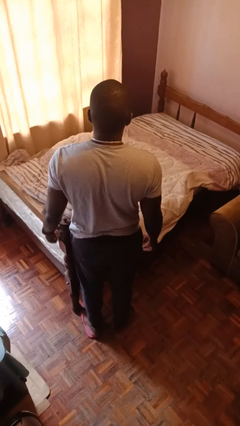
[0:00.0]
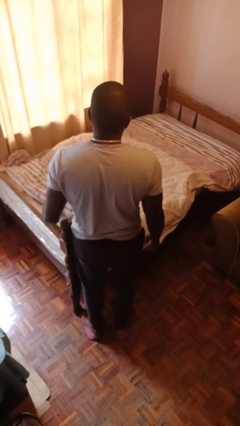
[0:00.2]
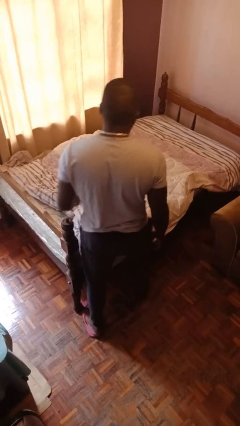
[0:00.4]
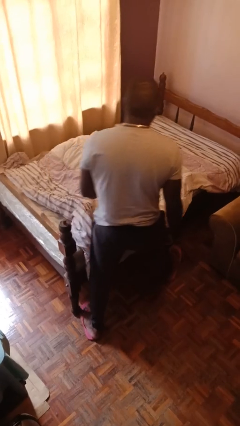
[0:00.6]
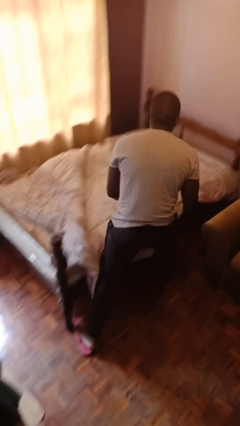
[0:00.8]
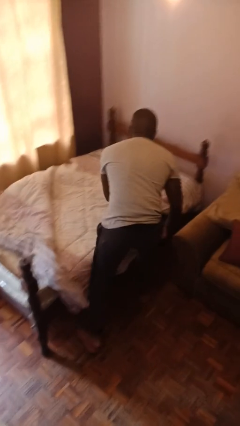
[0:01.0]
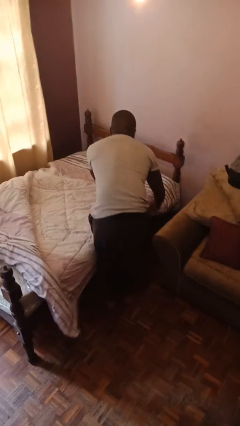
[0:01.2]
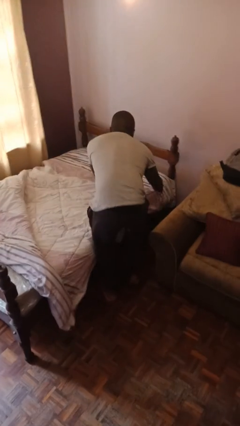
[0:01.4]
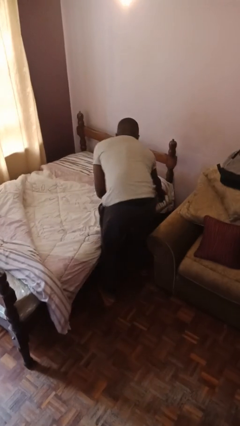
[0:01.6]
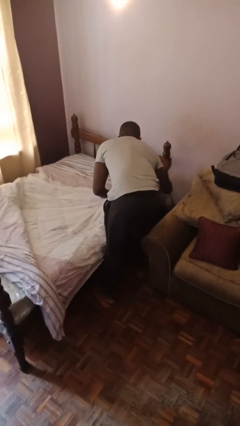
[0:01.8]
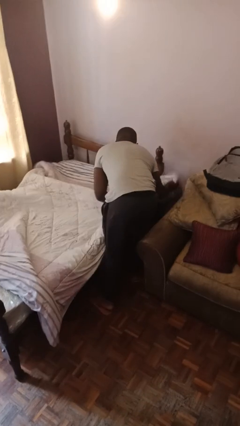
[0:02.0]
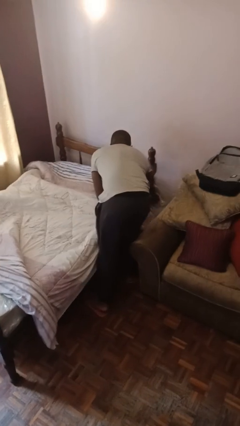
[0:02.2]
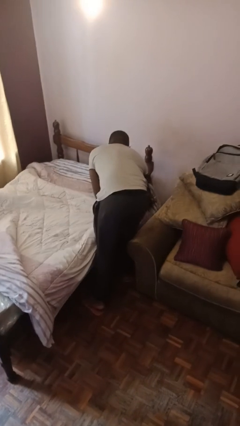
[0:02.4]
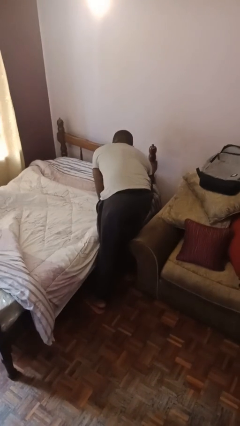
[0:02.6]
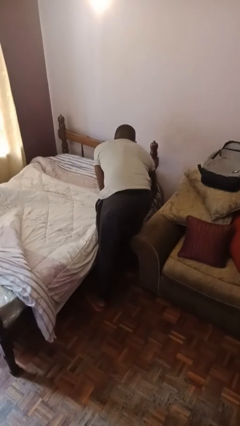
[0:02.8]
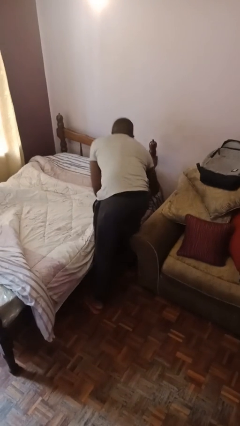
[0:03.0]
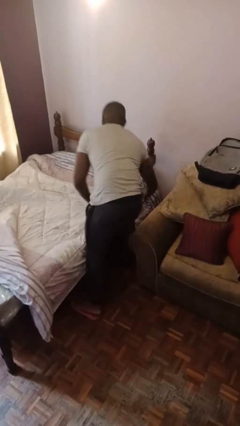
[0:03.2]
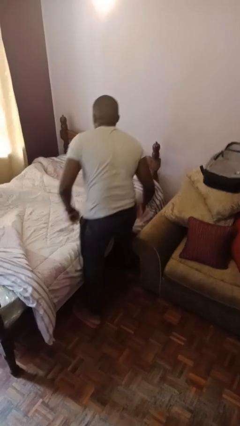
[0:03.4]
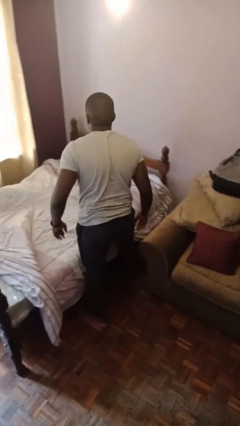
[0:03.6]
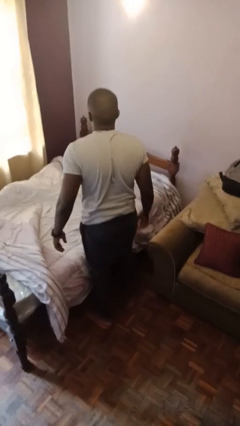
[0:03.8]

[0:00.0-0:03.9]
person makes bed

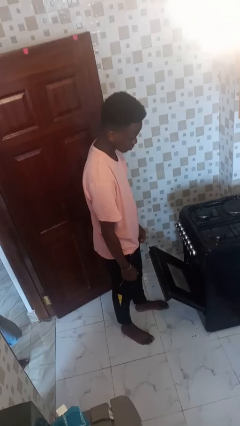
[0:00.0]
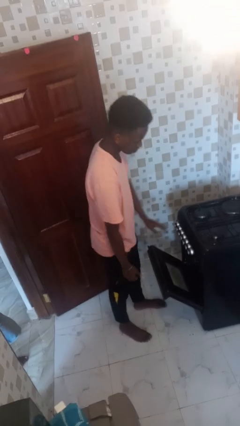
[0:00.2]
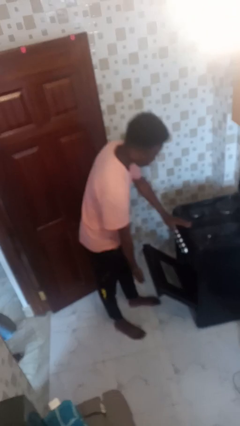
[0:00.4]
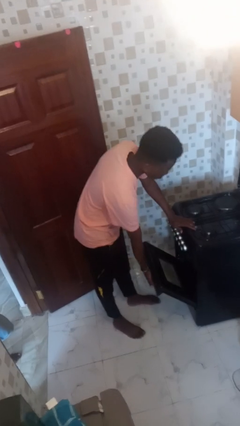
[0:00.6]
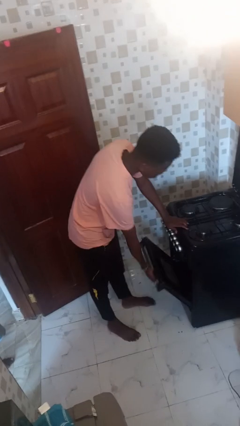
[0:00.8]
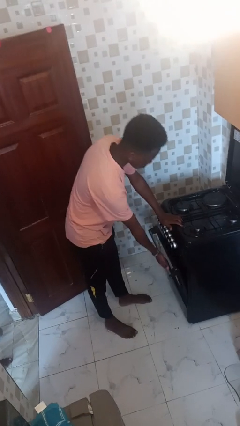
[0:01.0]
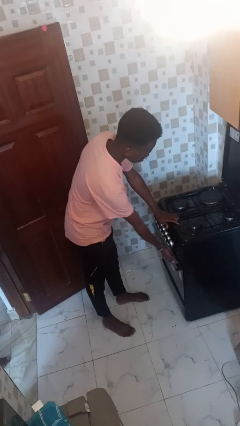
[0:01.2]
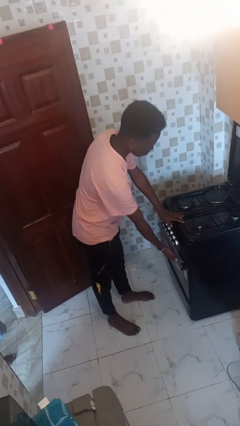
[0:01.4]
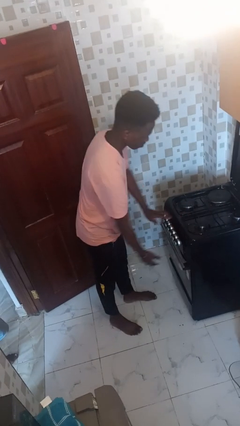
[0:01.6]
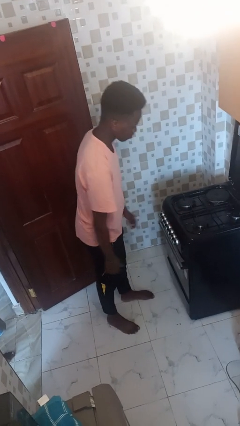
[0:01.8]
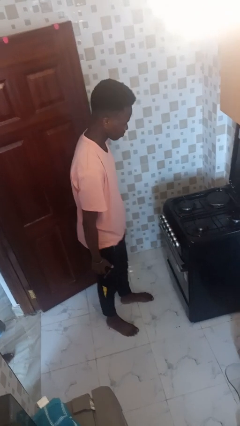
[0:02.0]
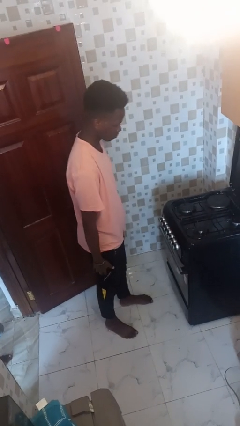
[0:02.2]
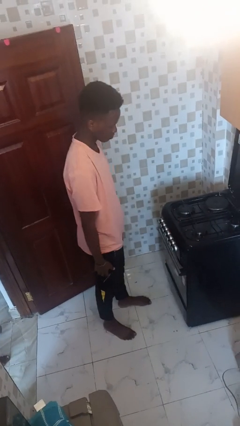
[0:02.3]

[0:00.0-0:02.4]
person closes oven door

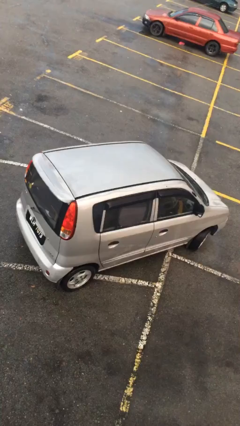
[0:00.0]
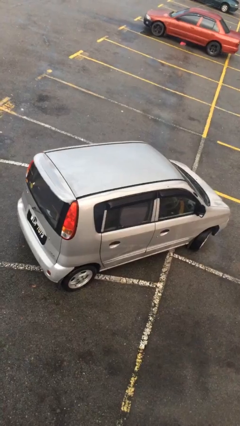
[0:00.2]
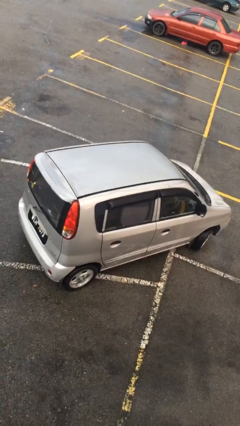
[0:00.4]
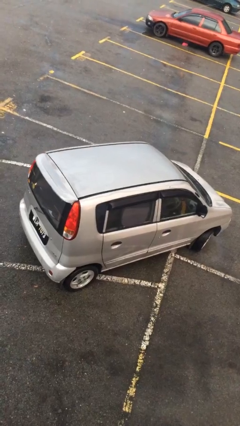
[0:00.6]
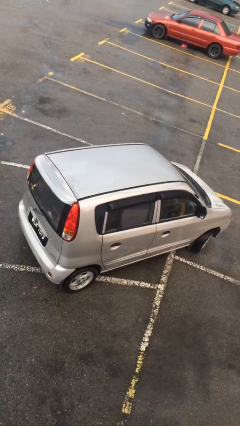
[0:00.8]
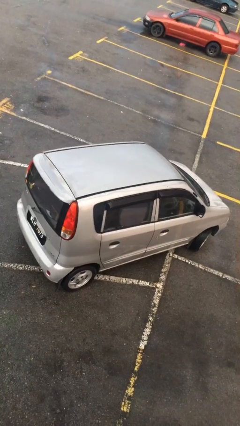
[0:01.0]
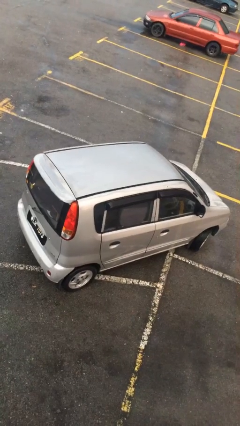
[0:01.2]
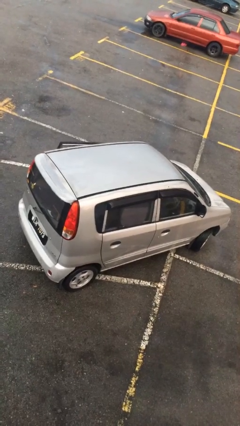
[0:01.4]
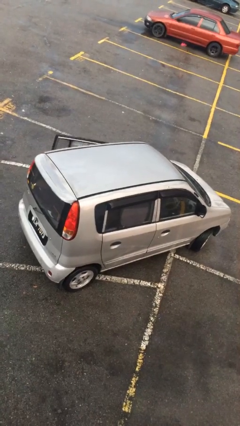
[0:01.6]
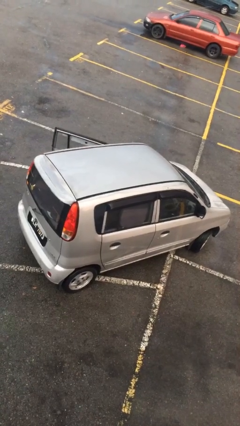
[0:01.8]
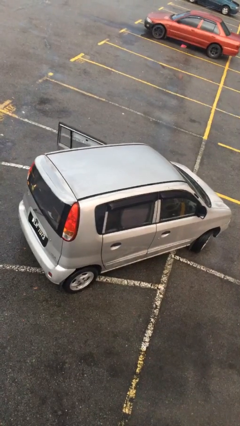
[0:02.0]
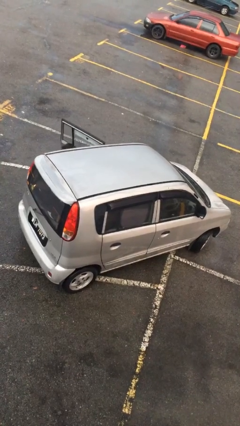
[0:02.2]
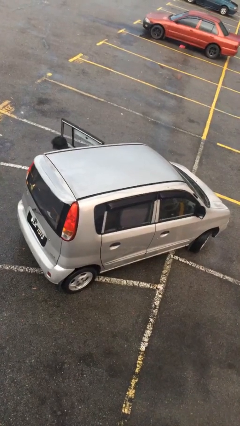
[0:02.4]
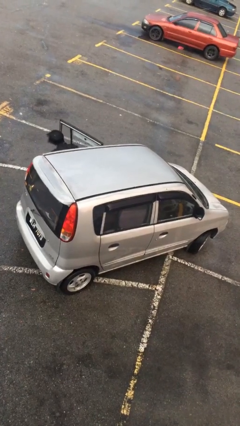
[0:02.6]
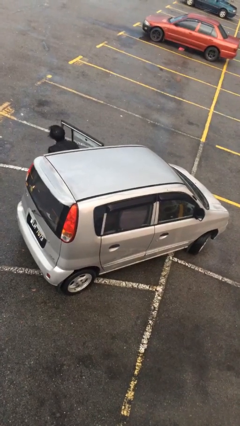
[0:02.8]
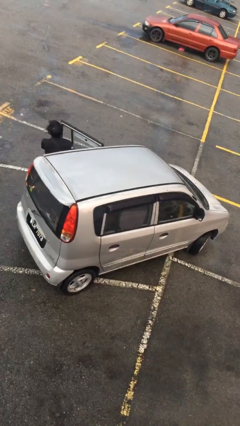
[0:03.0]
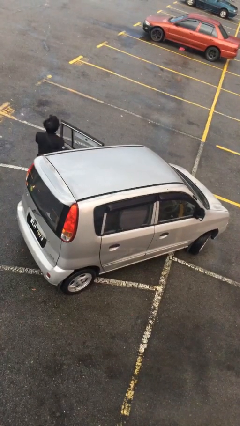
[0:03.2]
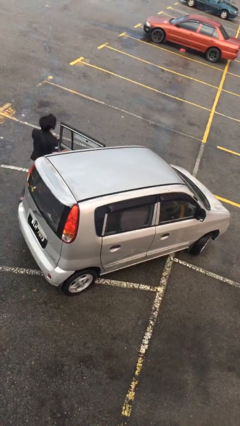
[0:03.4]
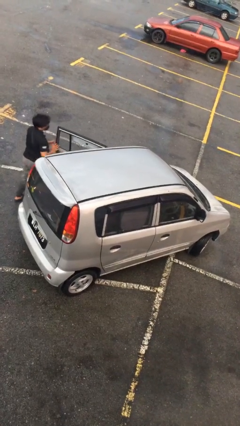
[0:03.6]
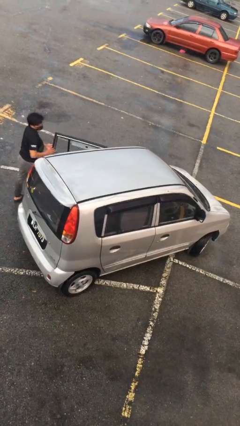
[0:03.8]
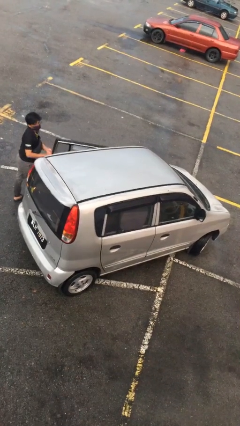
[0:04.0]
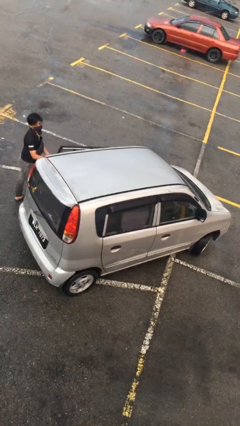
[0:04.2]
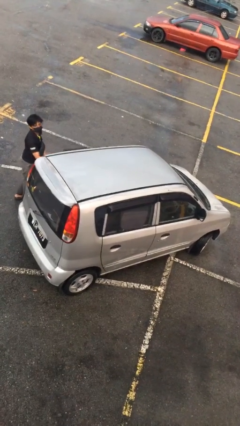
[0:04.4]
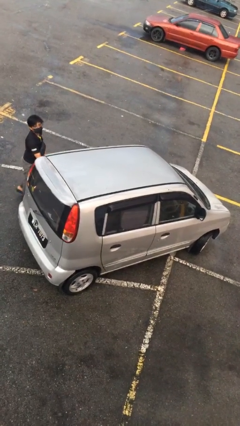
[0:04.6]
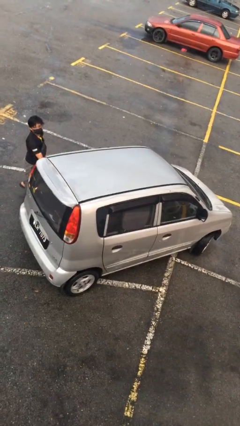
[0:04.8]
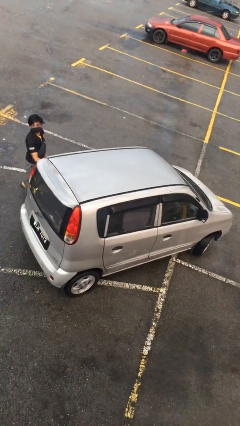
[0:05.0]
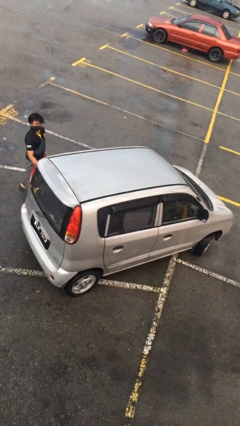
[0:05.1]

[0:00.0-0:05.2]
car drops off person

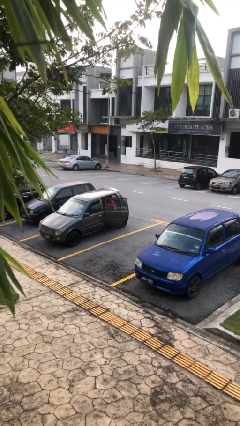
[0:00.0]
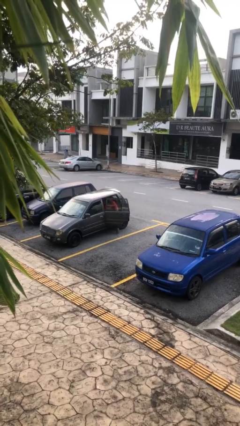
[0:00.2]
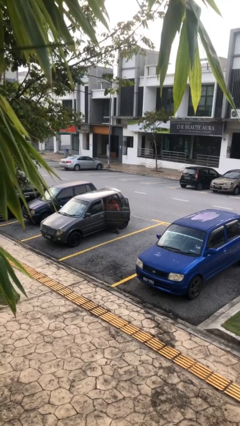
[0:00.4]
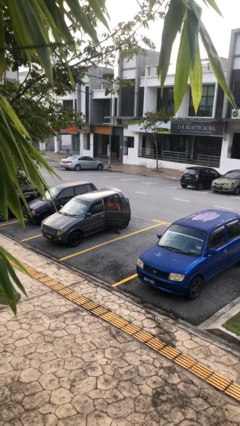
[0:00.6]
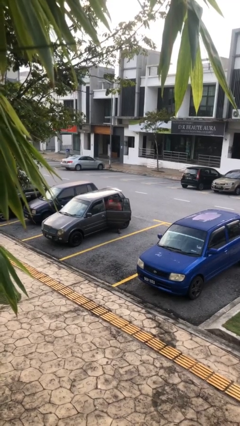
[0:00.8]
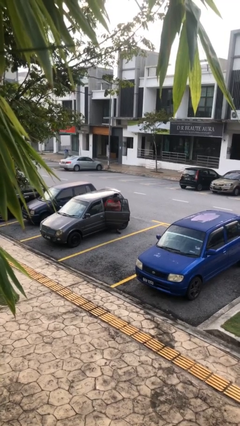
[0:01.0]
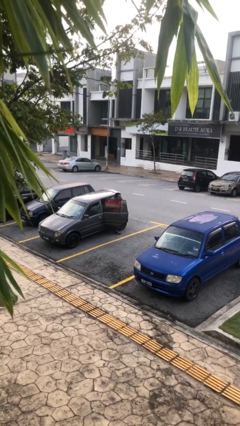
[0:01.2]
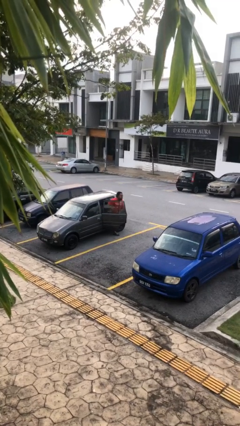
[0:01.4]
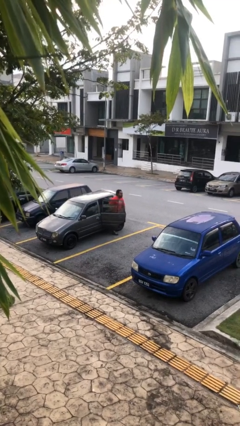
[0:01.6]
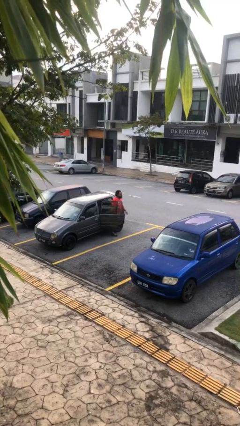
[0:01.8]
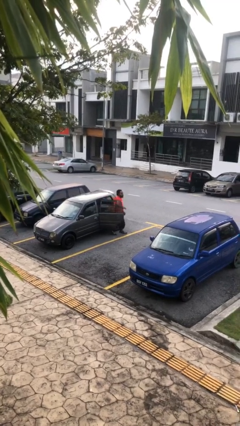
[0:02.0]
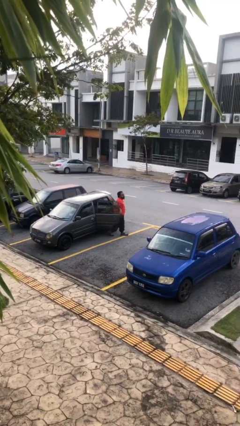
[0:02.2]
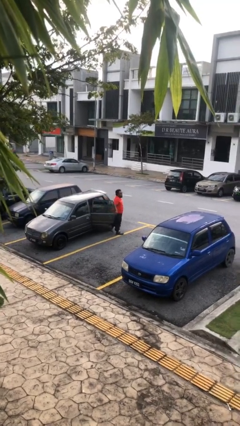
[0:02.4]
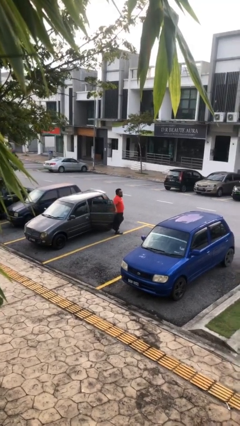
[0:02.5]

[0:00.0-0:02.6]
person exits car

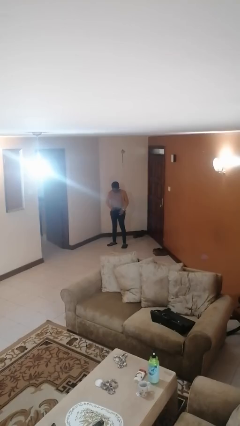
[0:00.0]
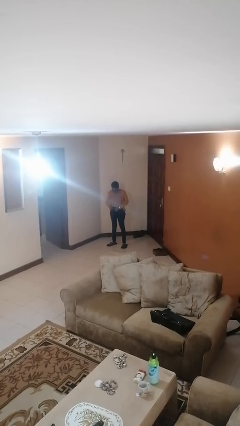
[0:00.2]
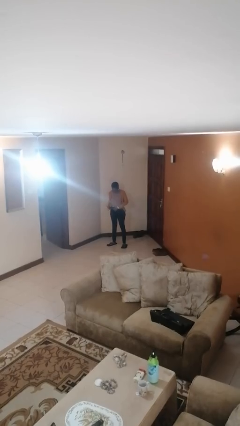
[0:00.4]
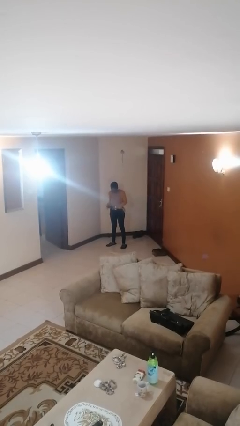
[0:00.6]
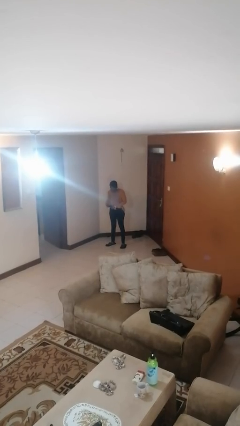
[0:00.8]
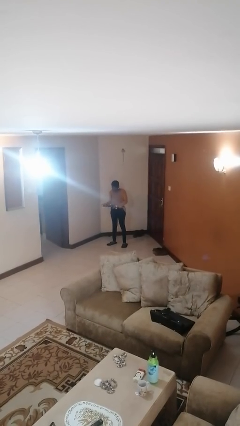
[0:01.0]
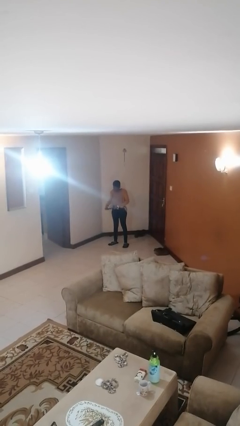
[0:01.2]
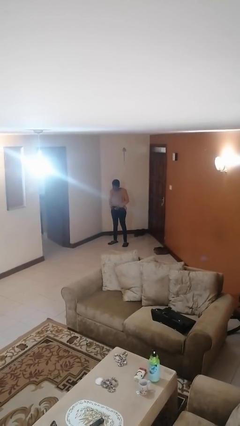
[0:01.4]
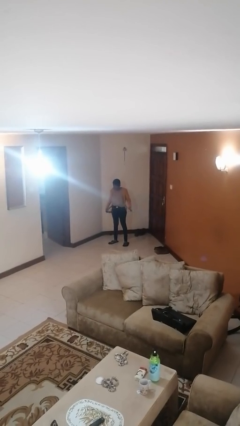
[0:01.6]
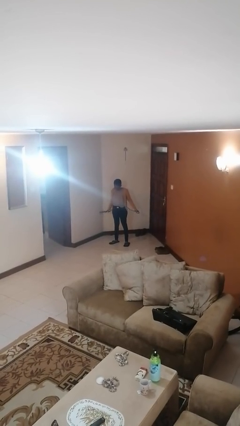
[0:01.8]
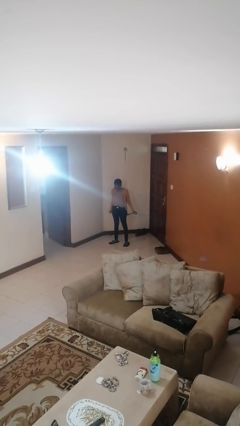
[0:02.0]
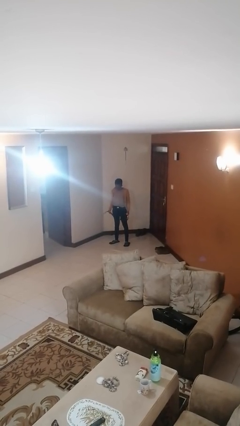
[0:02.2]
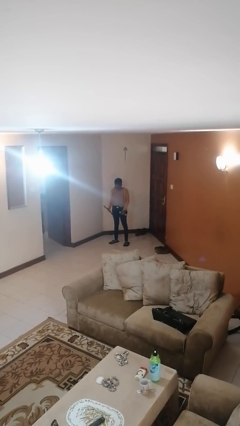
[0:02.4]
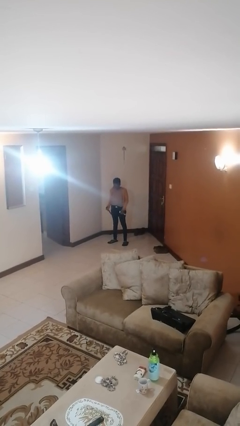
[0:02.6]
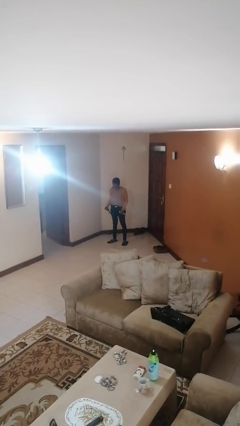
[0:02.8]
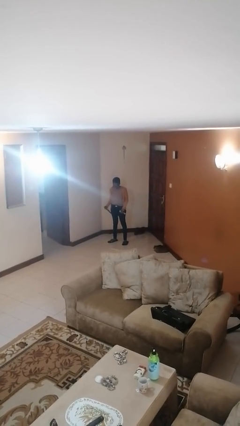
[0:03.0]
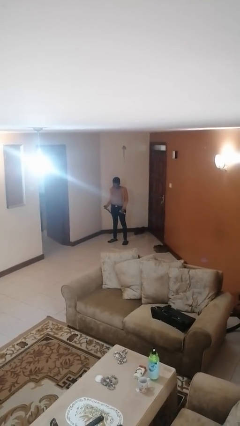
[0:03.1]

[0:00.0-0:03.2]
person takes off belt

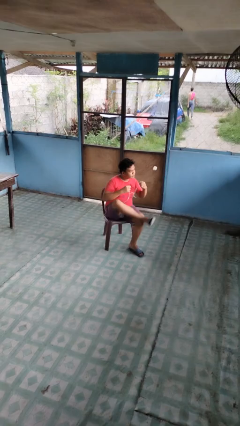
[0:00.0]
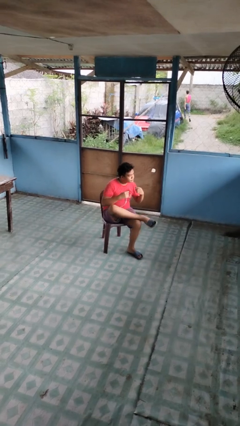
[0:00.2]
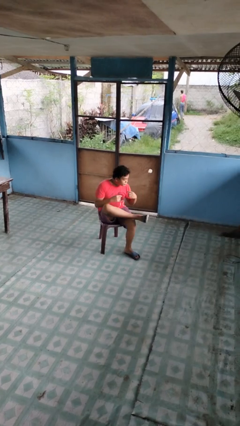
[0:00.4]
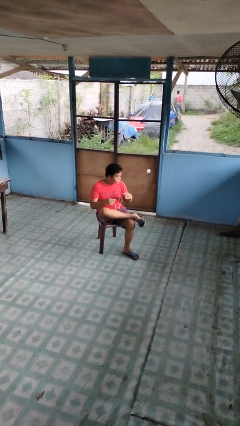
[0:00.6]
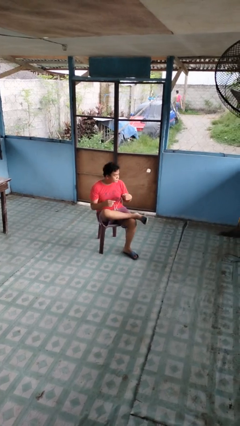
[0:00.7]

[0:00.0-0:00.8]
person takes off headphones
